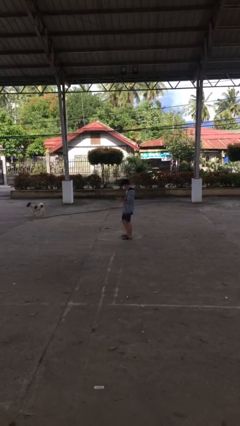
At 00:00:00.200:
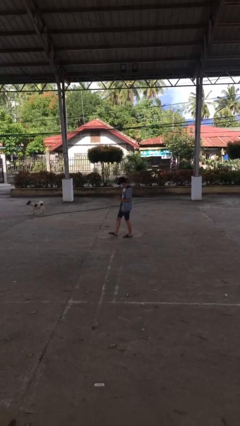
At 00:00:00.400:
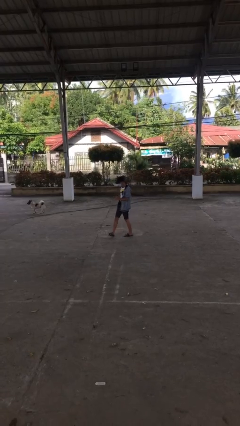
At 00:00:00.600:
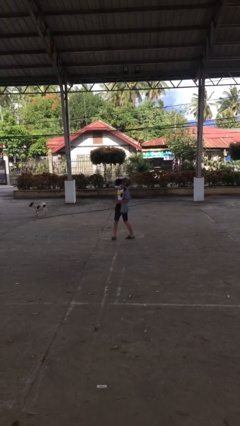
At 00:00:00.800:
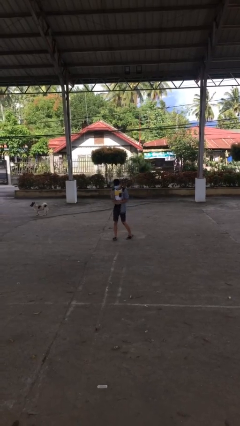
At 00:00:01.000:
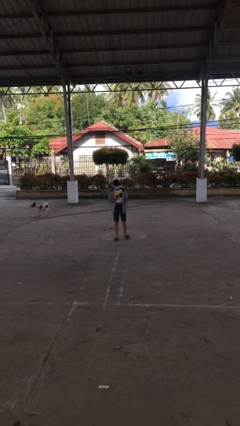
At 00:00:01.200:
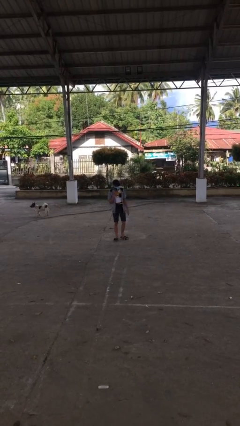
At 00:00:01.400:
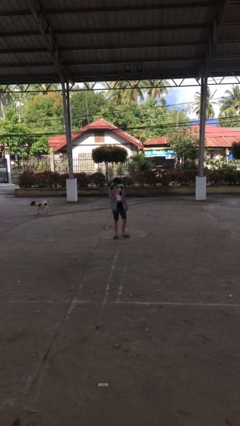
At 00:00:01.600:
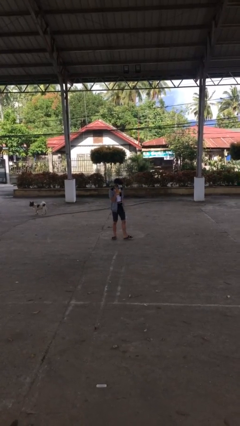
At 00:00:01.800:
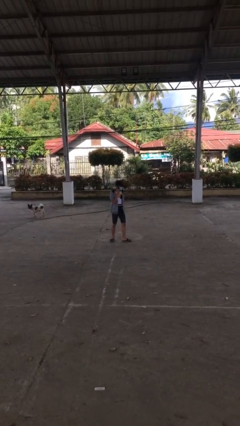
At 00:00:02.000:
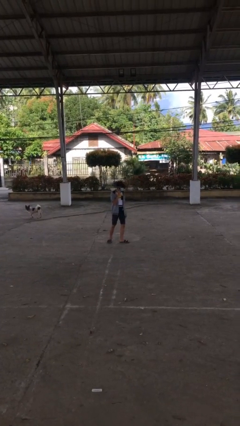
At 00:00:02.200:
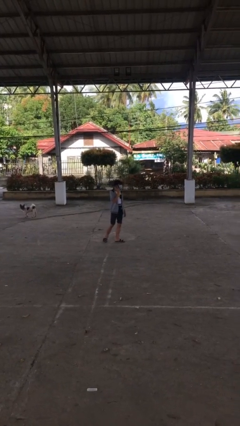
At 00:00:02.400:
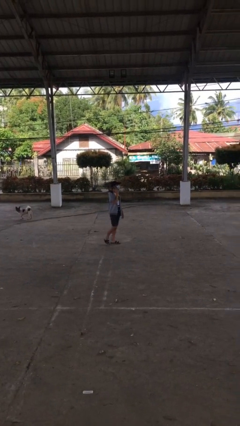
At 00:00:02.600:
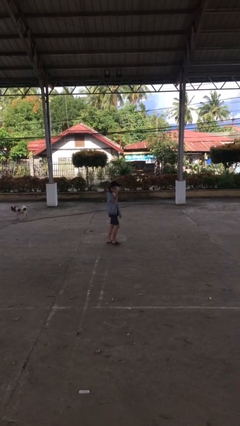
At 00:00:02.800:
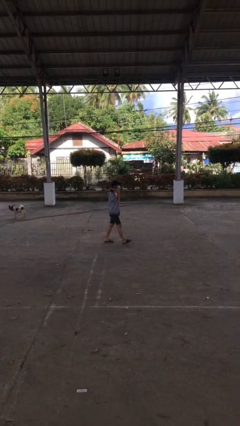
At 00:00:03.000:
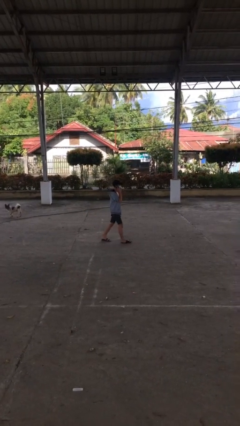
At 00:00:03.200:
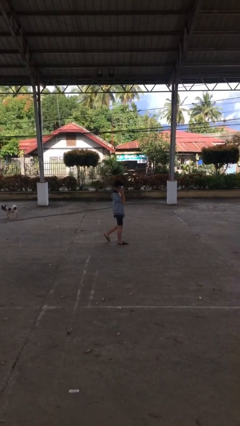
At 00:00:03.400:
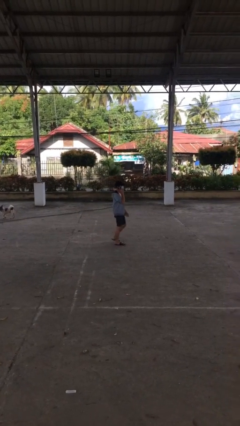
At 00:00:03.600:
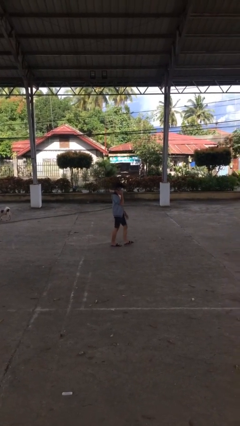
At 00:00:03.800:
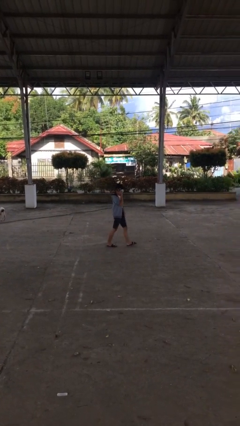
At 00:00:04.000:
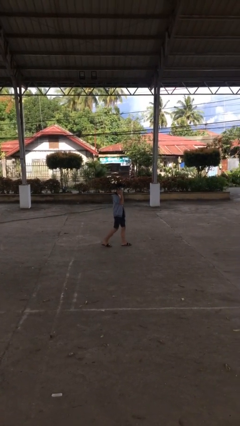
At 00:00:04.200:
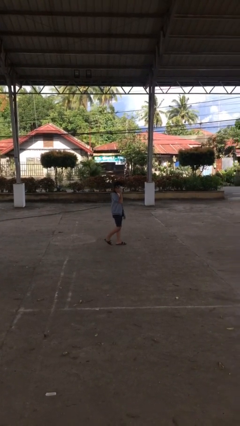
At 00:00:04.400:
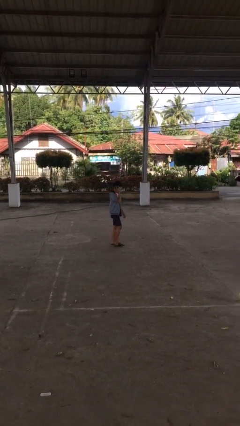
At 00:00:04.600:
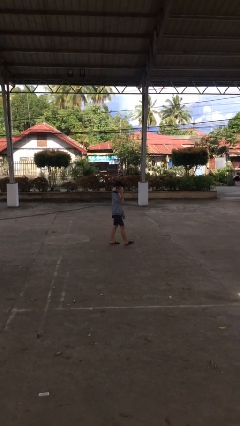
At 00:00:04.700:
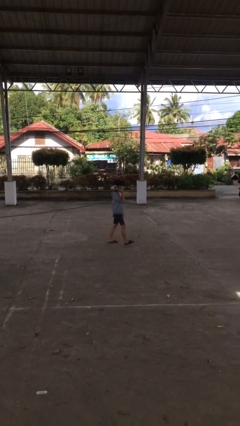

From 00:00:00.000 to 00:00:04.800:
person talks on phone

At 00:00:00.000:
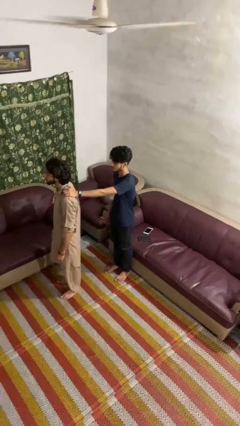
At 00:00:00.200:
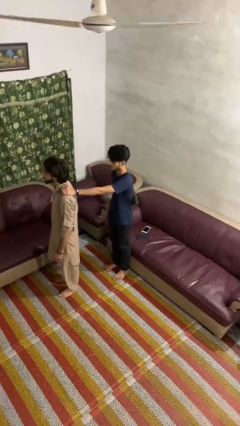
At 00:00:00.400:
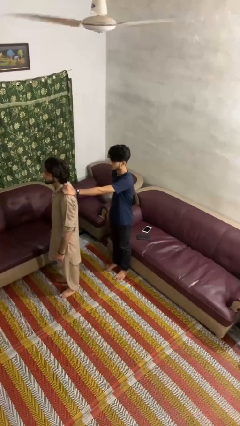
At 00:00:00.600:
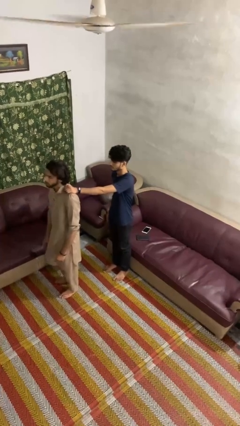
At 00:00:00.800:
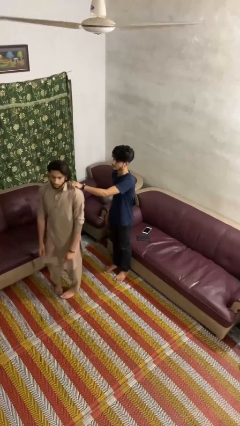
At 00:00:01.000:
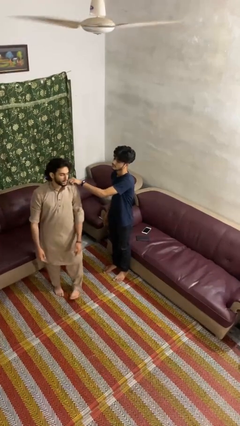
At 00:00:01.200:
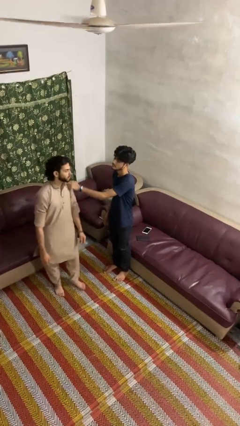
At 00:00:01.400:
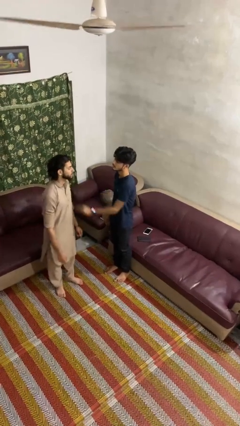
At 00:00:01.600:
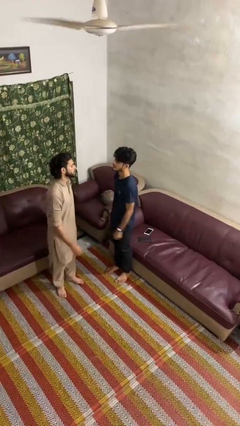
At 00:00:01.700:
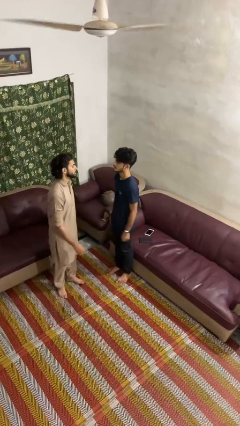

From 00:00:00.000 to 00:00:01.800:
person spins person around

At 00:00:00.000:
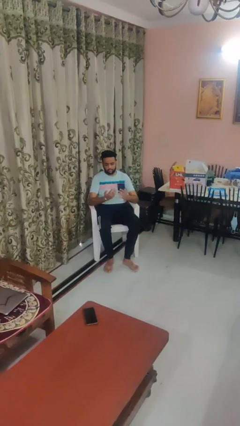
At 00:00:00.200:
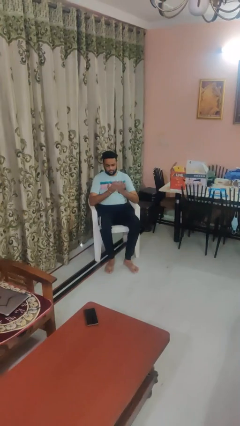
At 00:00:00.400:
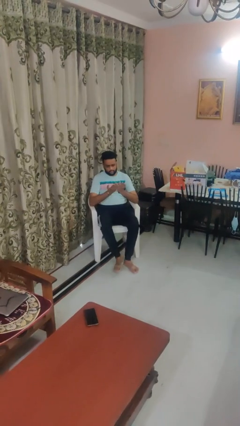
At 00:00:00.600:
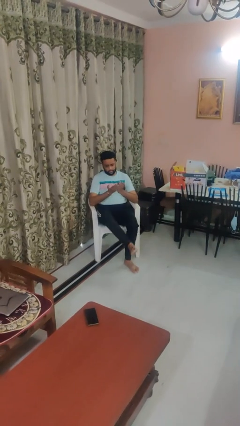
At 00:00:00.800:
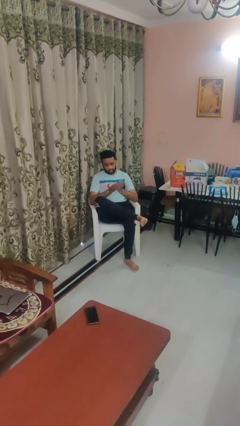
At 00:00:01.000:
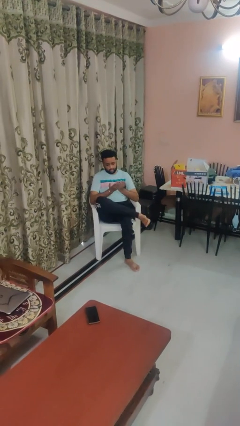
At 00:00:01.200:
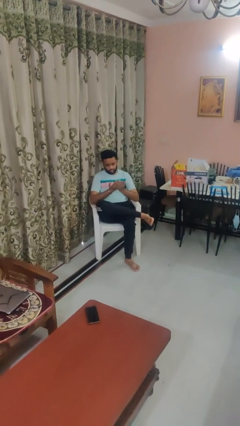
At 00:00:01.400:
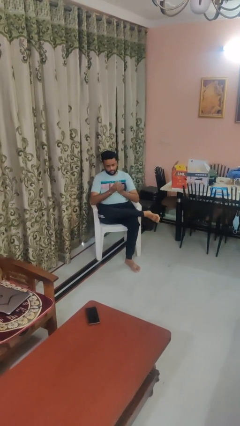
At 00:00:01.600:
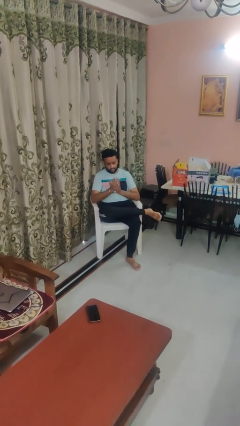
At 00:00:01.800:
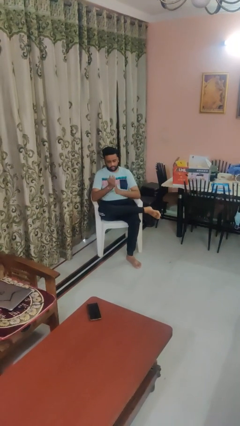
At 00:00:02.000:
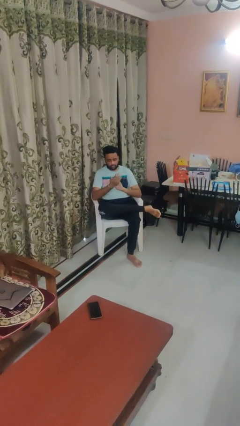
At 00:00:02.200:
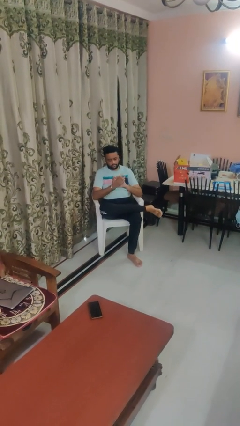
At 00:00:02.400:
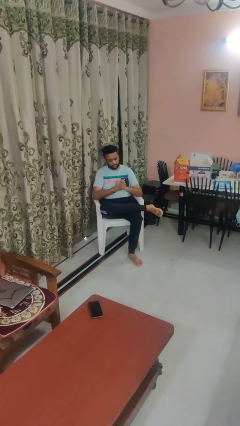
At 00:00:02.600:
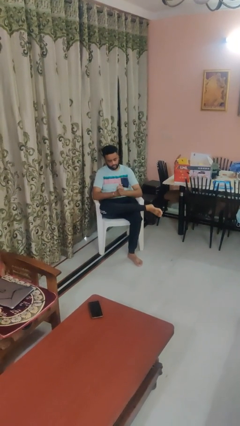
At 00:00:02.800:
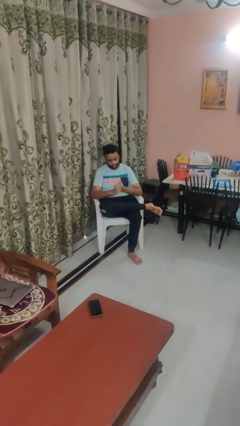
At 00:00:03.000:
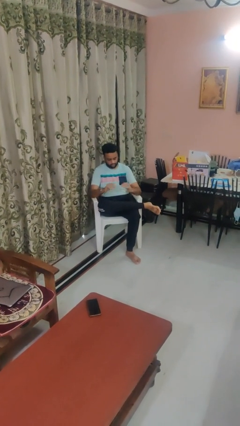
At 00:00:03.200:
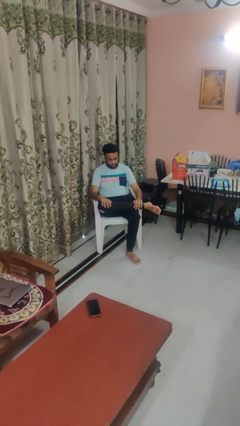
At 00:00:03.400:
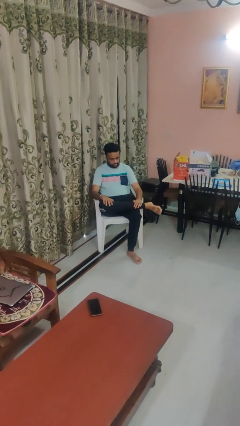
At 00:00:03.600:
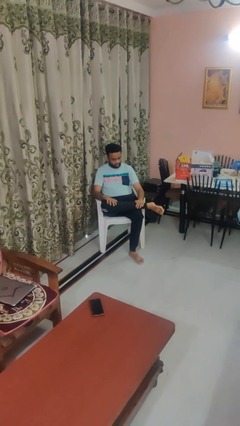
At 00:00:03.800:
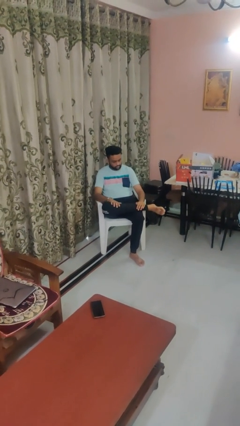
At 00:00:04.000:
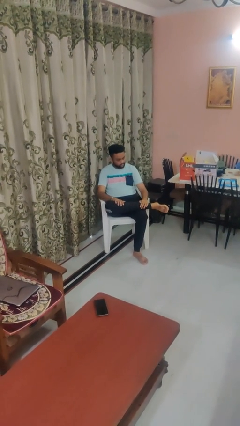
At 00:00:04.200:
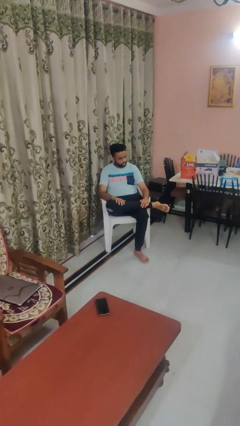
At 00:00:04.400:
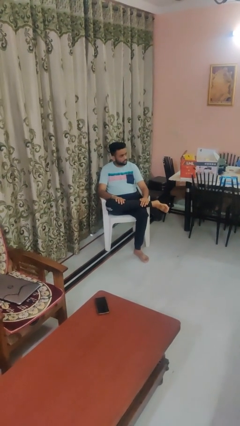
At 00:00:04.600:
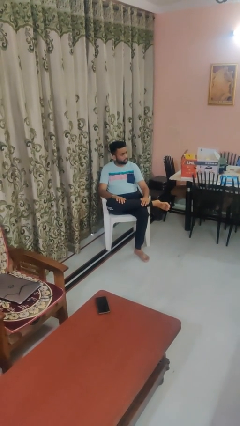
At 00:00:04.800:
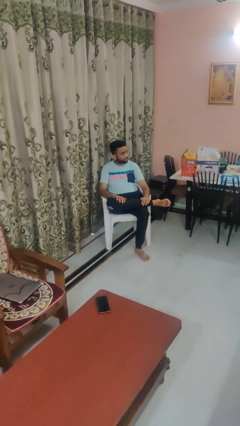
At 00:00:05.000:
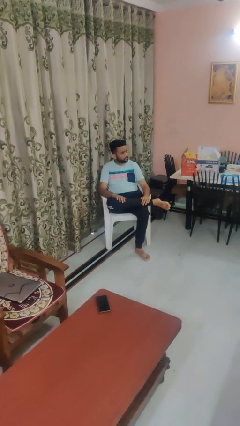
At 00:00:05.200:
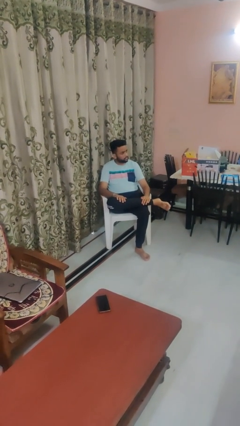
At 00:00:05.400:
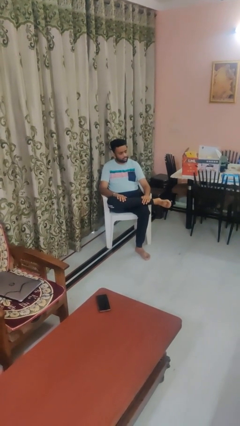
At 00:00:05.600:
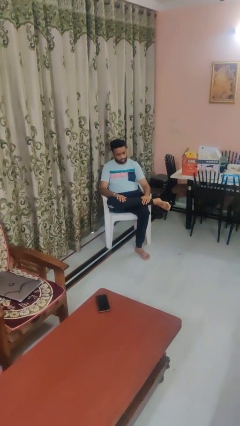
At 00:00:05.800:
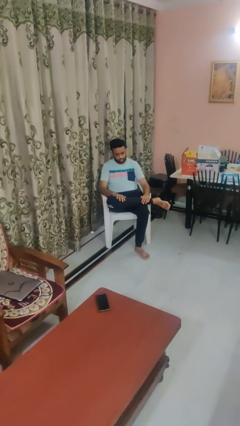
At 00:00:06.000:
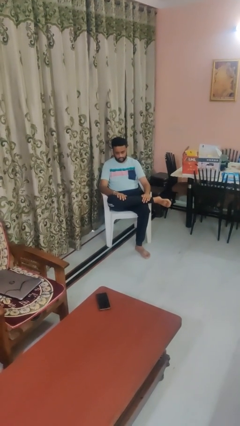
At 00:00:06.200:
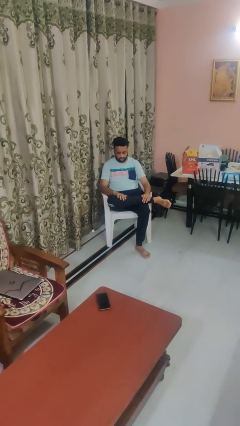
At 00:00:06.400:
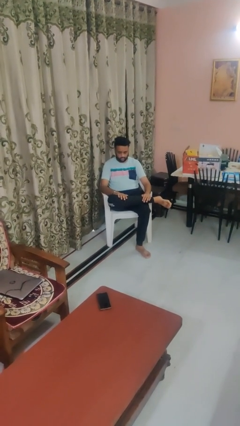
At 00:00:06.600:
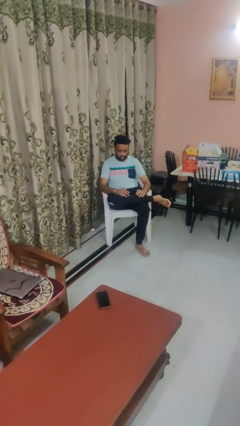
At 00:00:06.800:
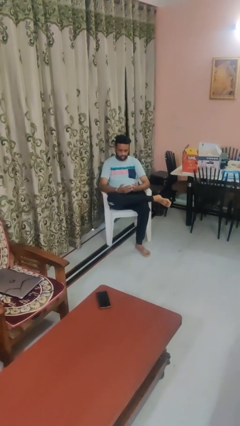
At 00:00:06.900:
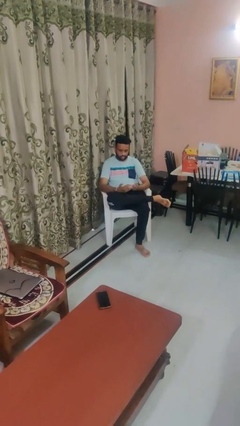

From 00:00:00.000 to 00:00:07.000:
person looks at hands in lap

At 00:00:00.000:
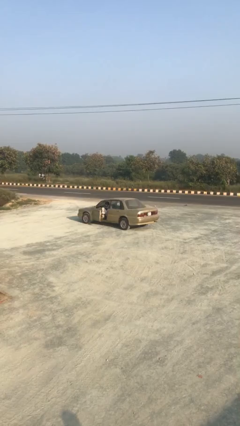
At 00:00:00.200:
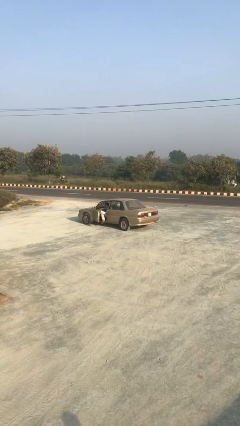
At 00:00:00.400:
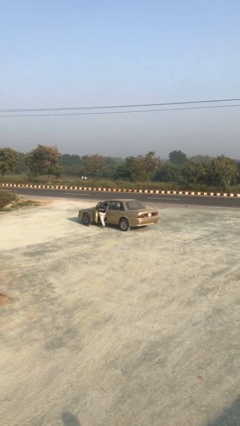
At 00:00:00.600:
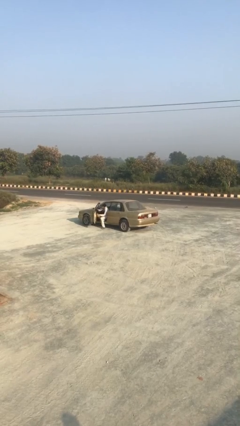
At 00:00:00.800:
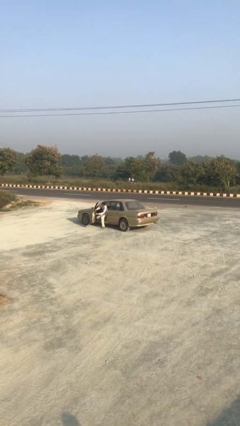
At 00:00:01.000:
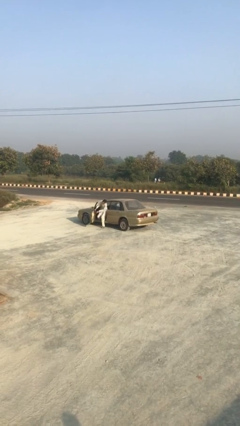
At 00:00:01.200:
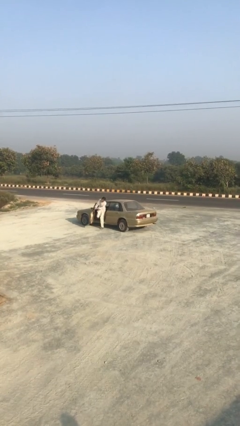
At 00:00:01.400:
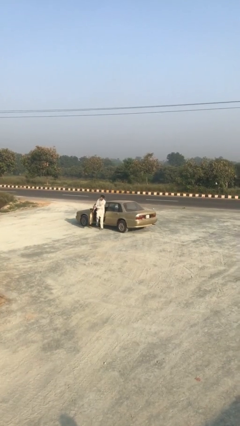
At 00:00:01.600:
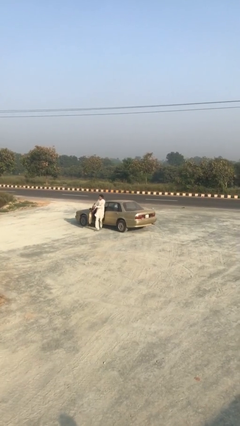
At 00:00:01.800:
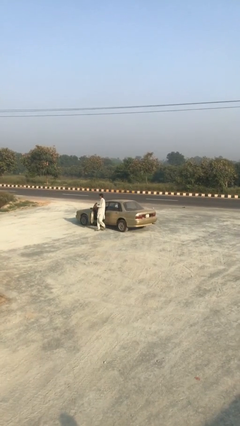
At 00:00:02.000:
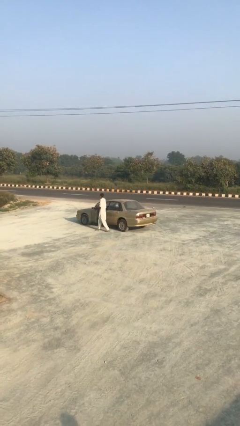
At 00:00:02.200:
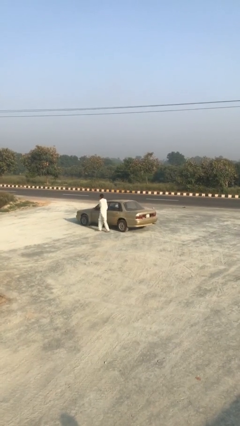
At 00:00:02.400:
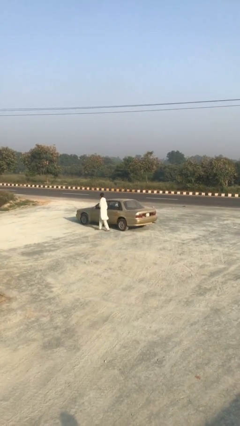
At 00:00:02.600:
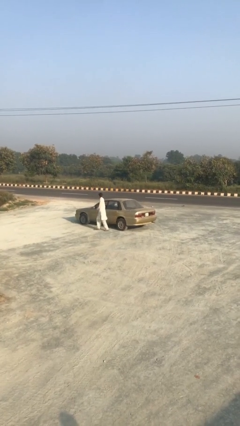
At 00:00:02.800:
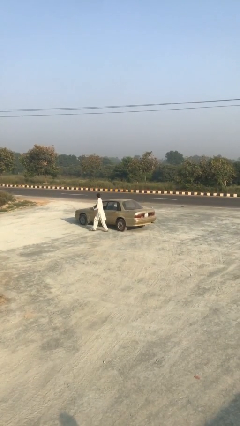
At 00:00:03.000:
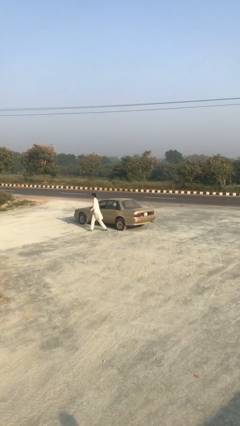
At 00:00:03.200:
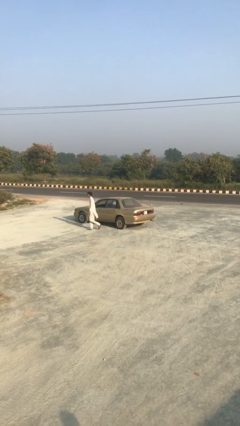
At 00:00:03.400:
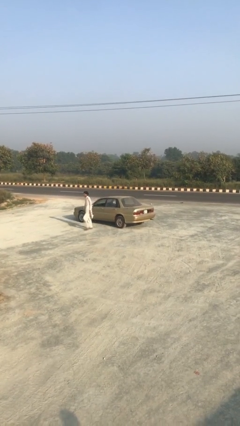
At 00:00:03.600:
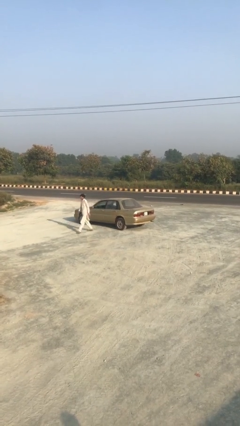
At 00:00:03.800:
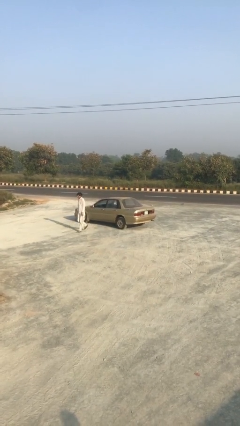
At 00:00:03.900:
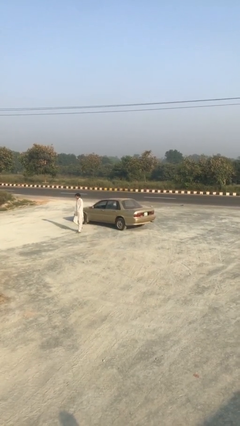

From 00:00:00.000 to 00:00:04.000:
car drops off person
